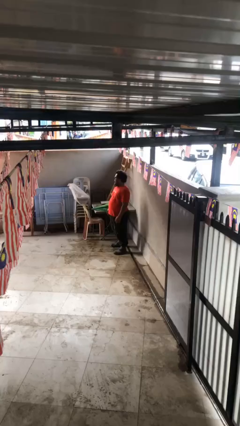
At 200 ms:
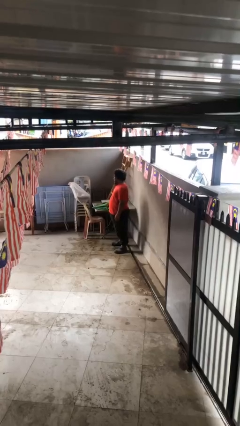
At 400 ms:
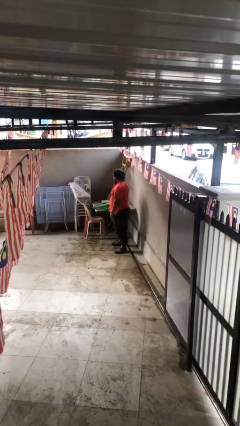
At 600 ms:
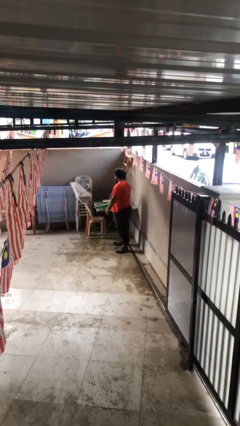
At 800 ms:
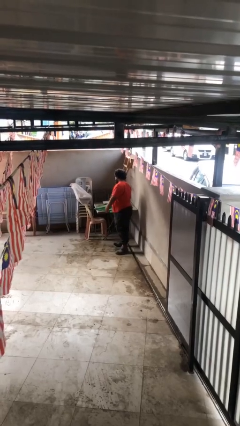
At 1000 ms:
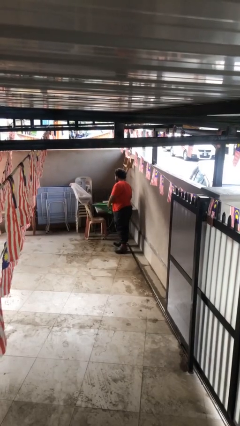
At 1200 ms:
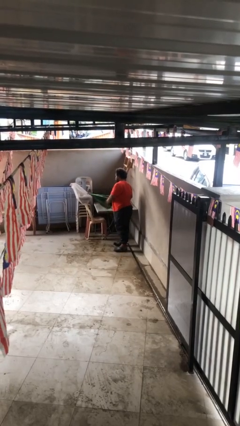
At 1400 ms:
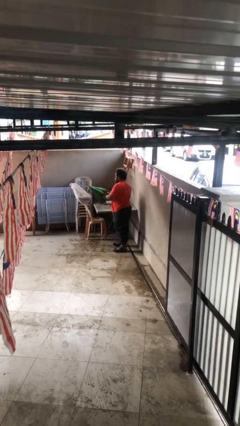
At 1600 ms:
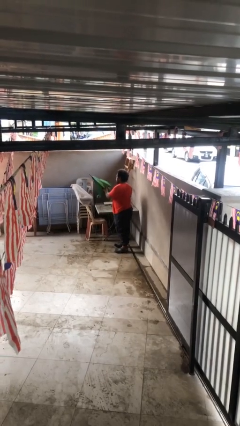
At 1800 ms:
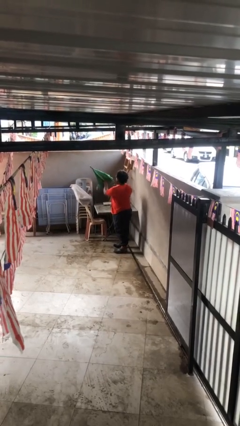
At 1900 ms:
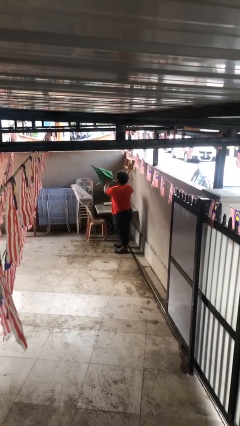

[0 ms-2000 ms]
person picks up object from table

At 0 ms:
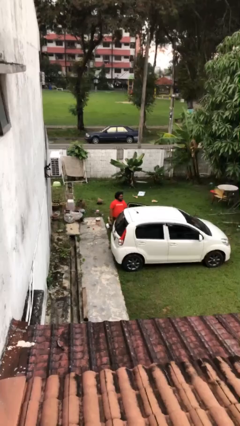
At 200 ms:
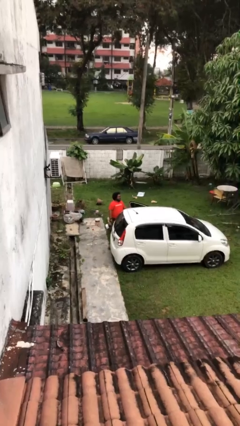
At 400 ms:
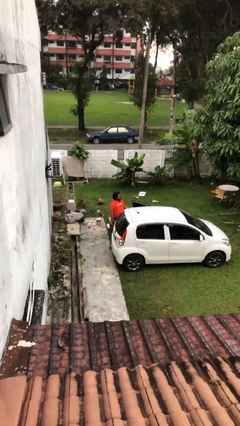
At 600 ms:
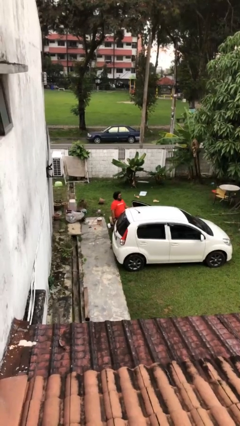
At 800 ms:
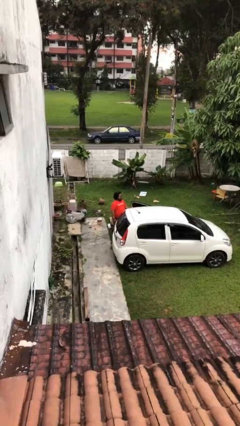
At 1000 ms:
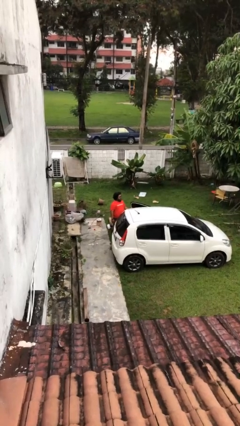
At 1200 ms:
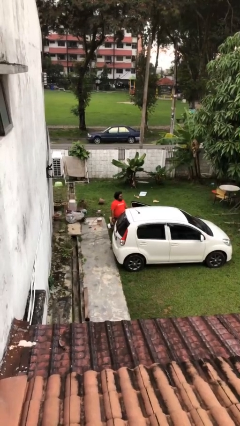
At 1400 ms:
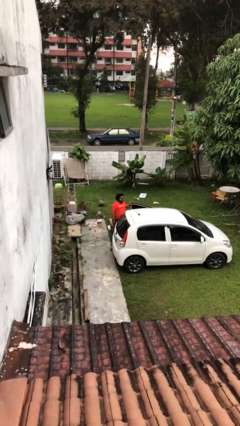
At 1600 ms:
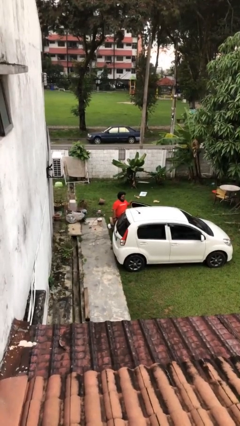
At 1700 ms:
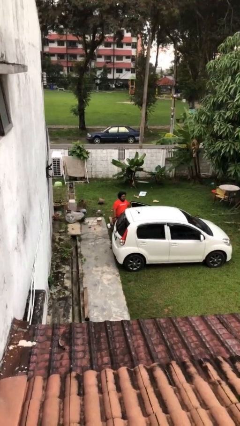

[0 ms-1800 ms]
person opens car door

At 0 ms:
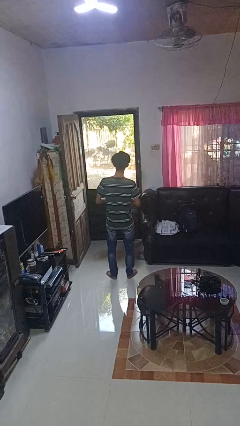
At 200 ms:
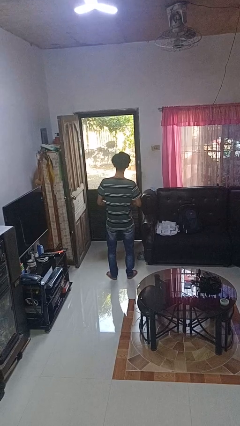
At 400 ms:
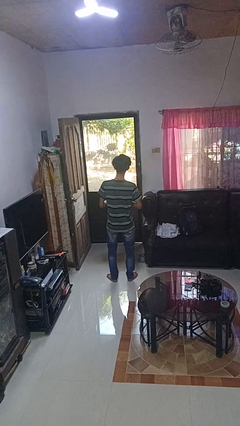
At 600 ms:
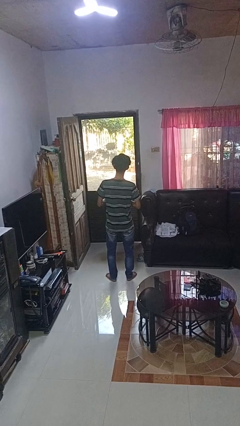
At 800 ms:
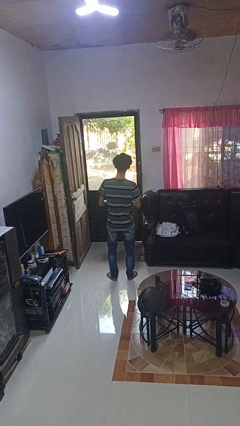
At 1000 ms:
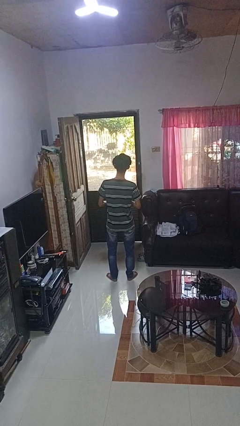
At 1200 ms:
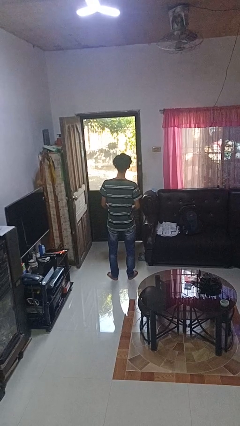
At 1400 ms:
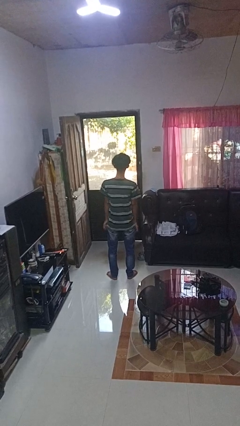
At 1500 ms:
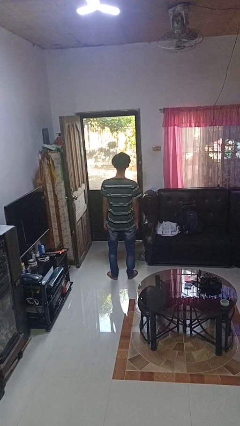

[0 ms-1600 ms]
person buttons shirt

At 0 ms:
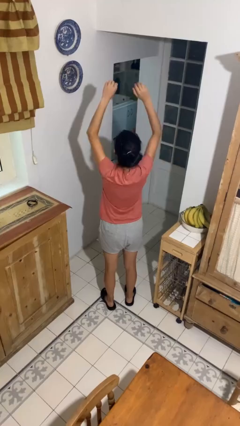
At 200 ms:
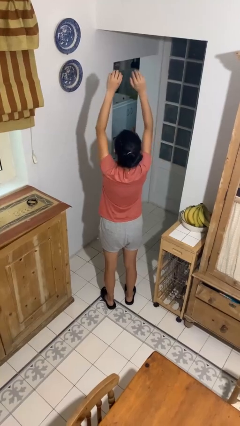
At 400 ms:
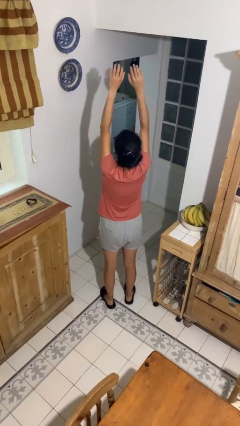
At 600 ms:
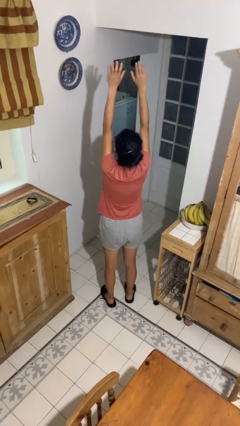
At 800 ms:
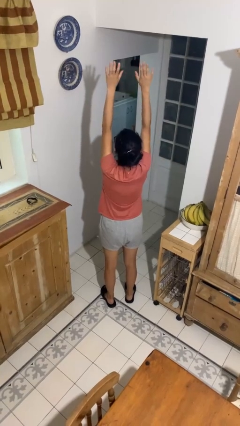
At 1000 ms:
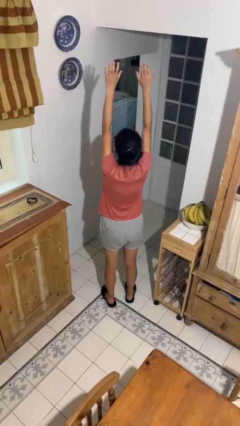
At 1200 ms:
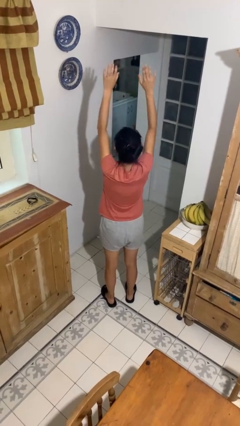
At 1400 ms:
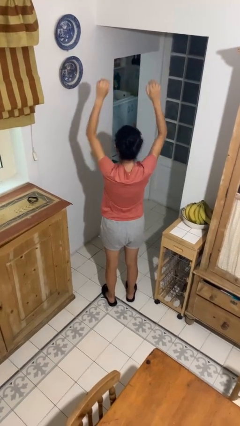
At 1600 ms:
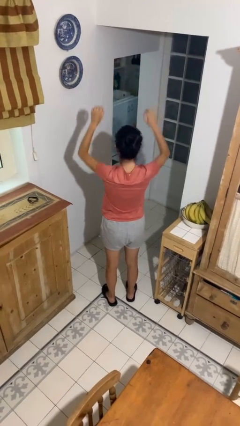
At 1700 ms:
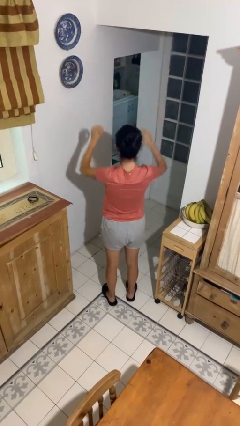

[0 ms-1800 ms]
person stretches arms over head

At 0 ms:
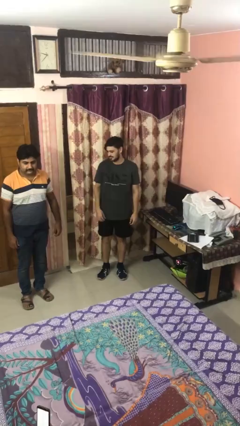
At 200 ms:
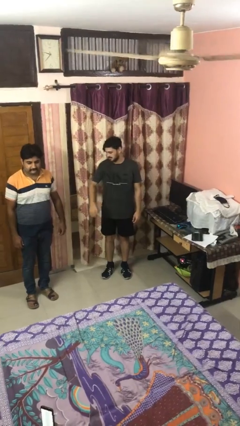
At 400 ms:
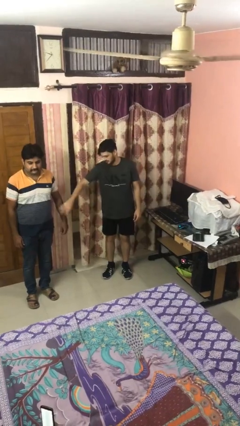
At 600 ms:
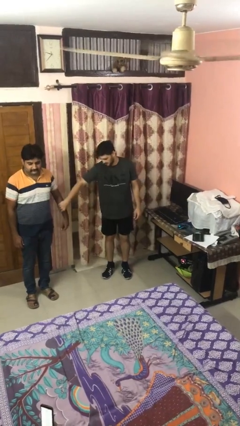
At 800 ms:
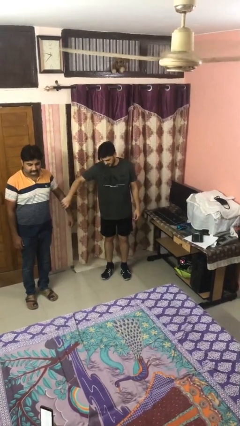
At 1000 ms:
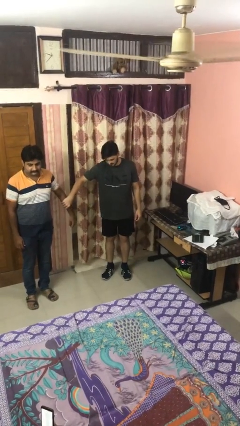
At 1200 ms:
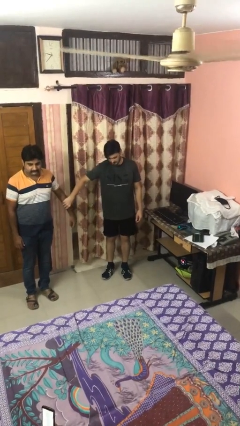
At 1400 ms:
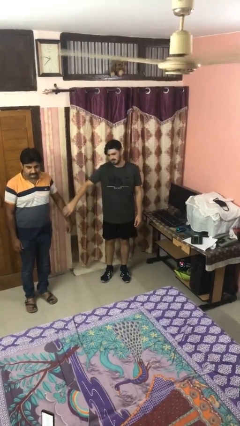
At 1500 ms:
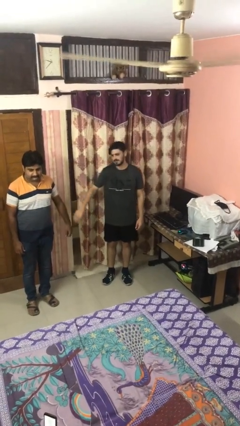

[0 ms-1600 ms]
person grabs person by forearm

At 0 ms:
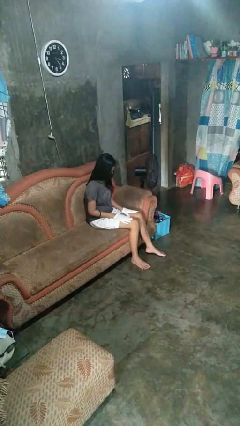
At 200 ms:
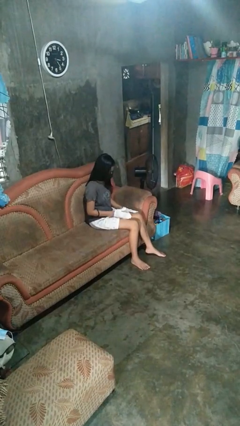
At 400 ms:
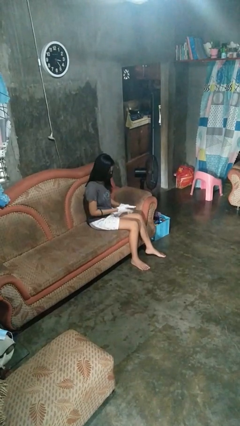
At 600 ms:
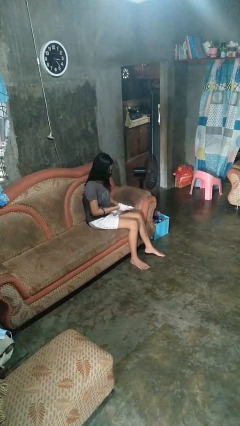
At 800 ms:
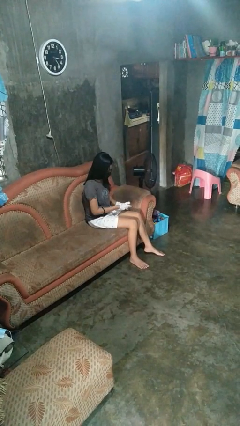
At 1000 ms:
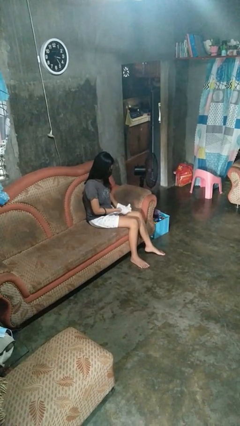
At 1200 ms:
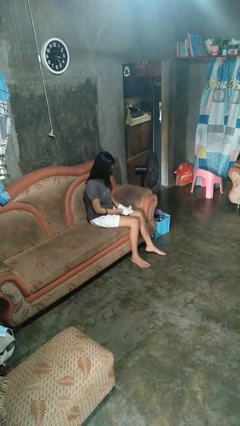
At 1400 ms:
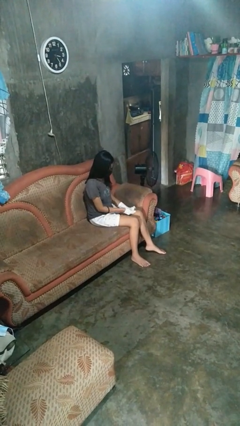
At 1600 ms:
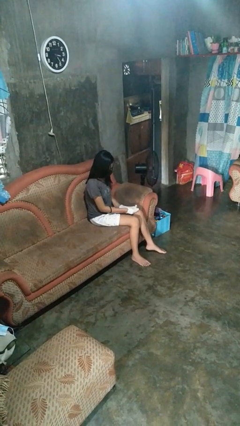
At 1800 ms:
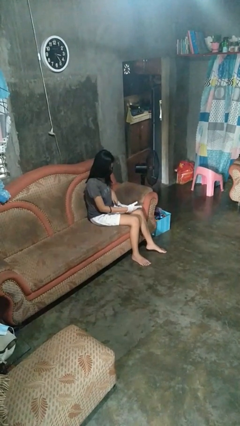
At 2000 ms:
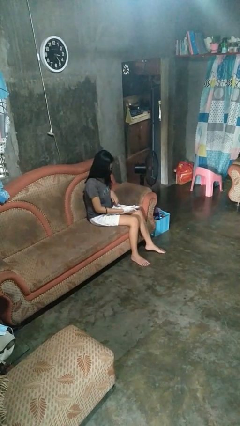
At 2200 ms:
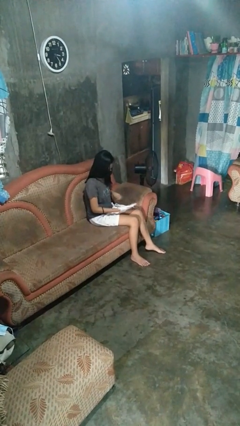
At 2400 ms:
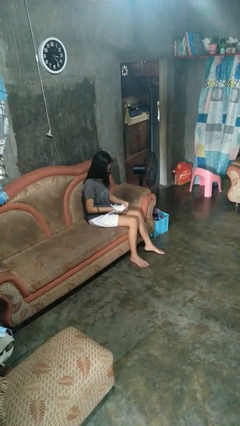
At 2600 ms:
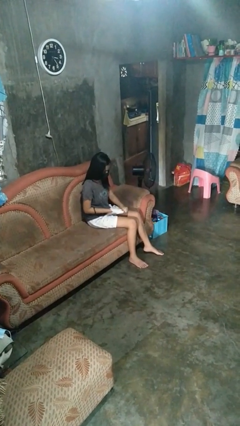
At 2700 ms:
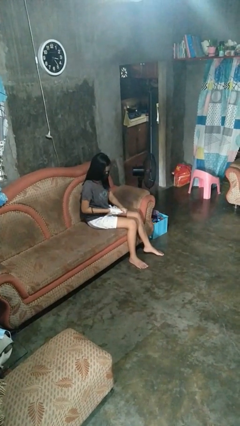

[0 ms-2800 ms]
person takes off gloves

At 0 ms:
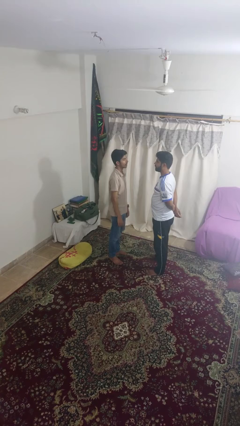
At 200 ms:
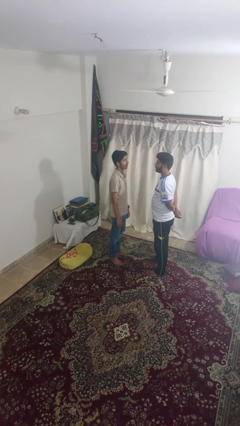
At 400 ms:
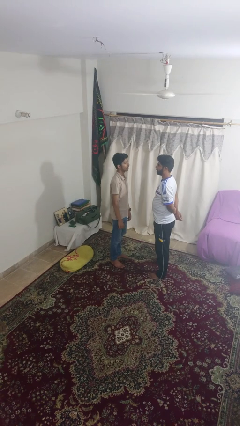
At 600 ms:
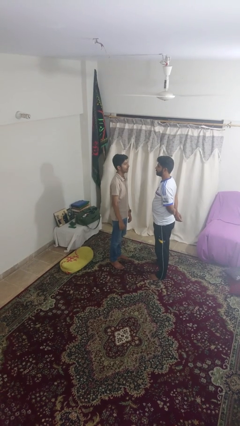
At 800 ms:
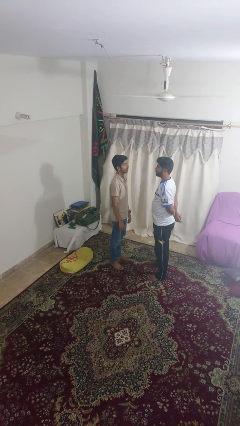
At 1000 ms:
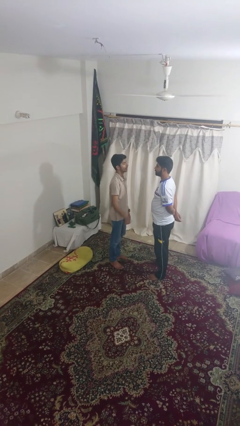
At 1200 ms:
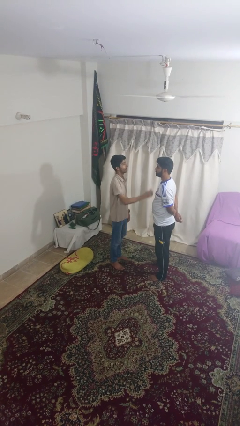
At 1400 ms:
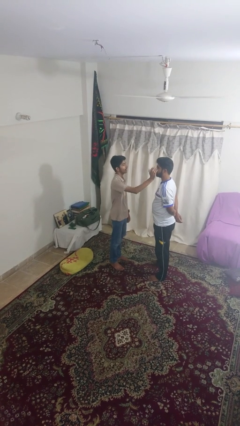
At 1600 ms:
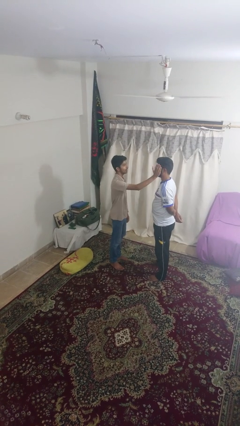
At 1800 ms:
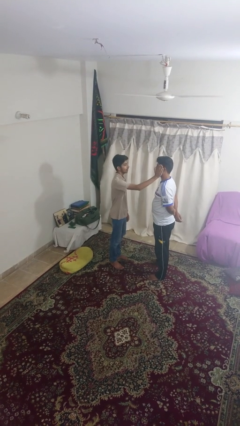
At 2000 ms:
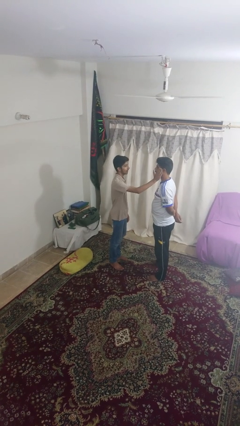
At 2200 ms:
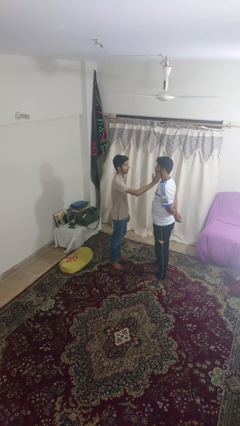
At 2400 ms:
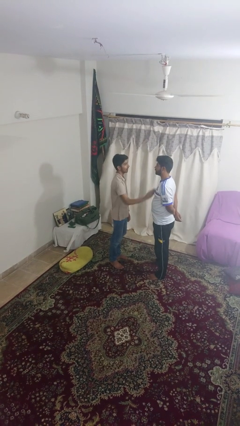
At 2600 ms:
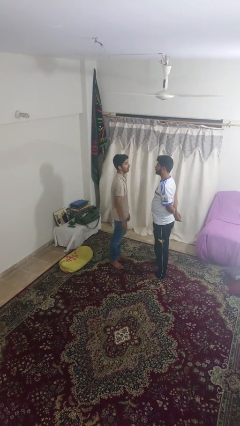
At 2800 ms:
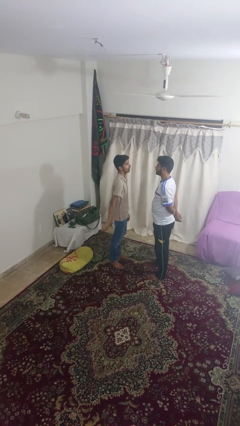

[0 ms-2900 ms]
person touches face of person

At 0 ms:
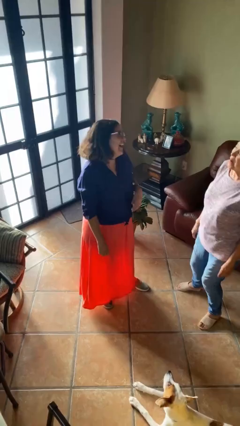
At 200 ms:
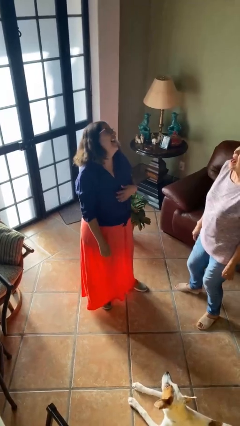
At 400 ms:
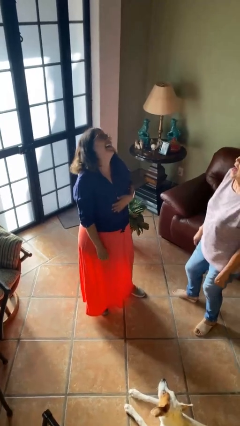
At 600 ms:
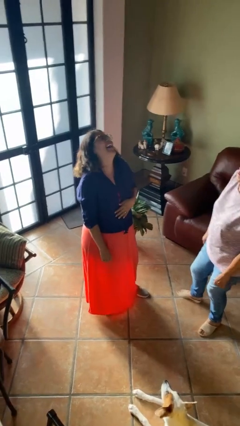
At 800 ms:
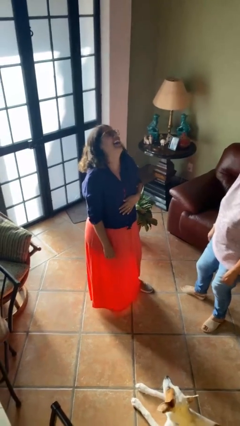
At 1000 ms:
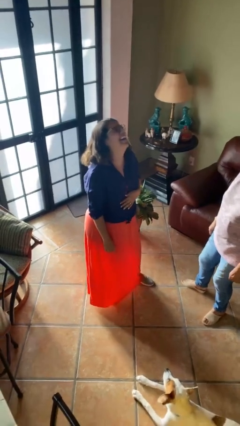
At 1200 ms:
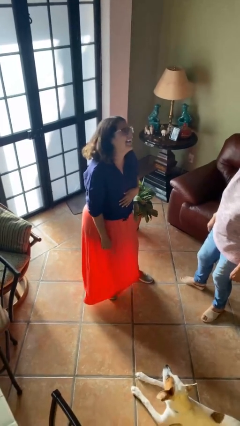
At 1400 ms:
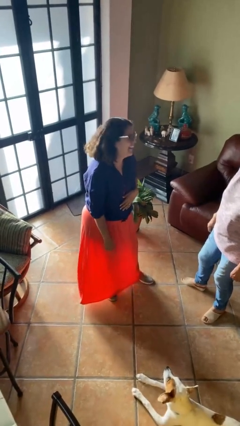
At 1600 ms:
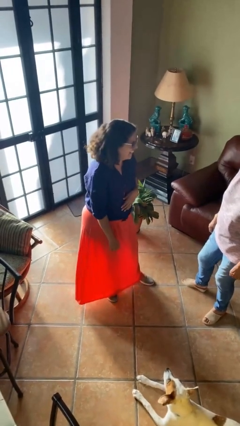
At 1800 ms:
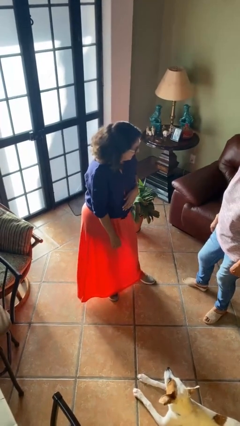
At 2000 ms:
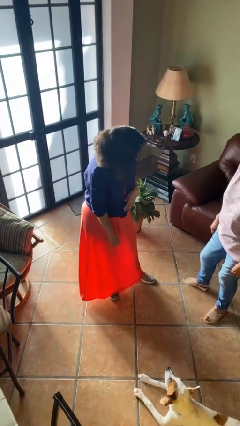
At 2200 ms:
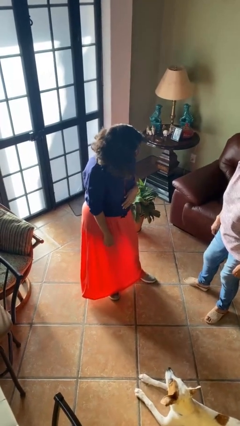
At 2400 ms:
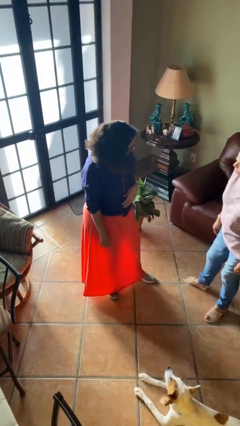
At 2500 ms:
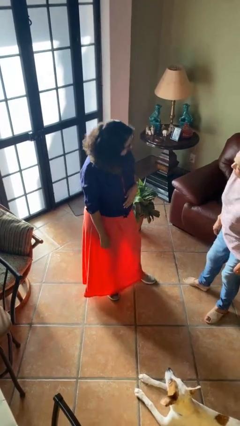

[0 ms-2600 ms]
person laughs with person
